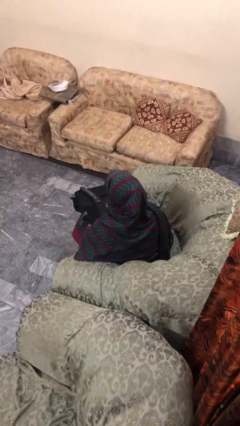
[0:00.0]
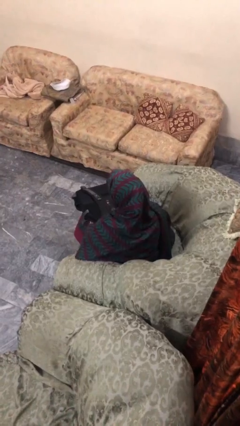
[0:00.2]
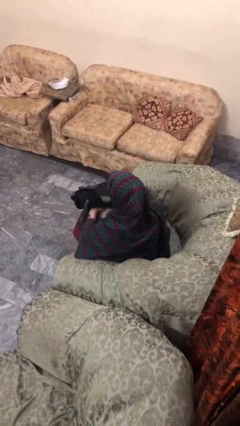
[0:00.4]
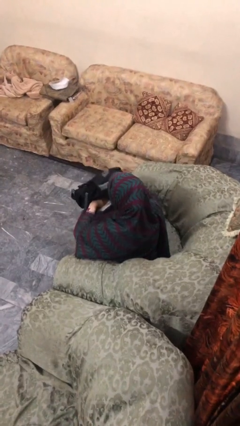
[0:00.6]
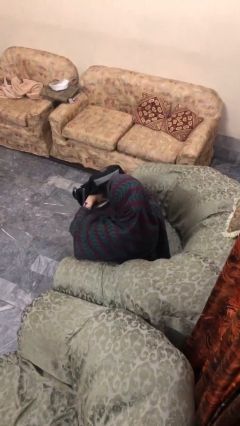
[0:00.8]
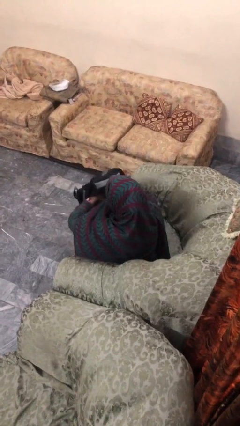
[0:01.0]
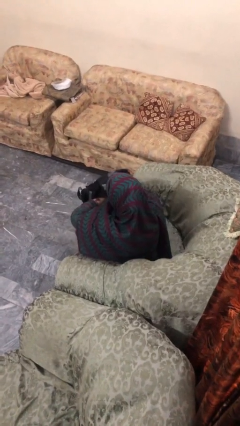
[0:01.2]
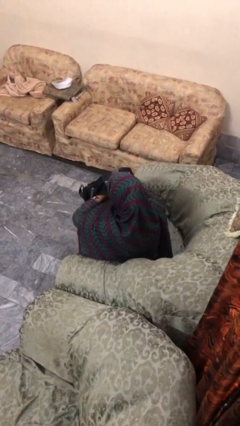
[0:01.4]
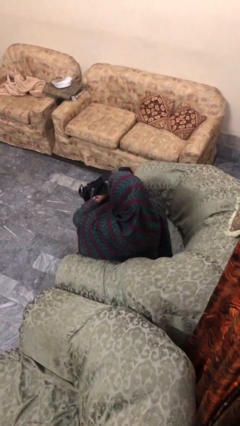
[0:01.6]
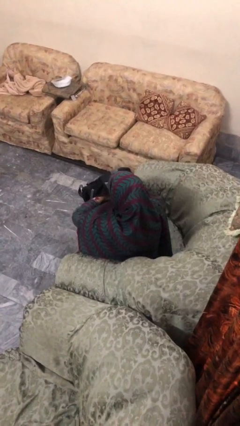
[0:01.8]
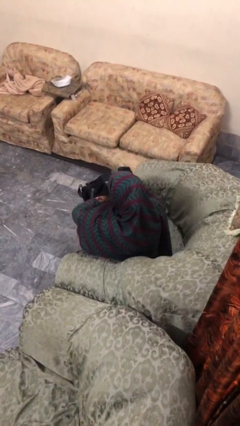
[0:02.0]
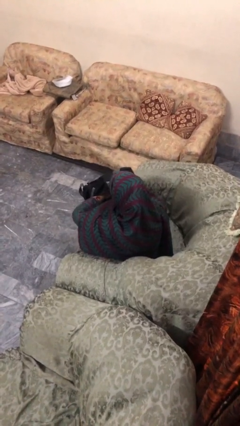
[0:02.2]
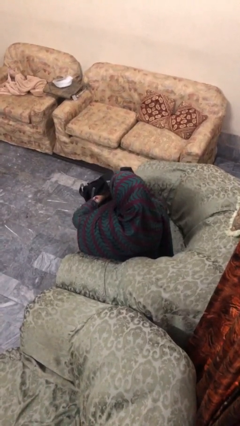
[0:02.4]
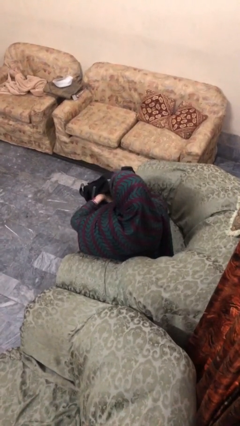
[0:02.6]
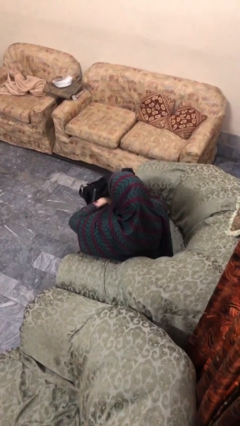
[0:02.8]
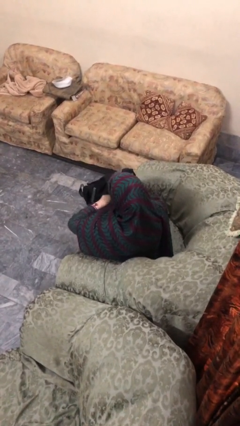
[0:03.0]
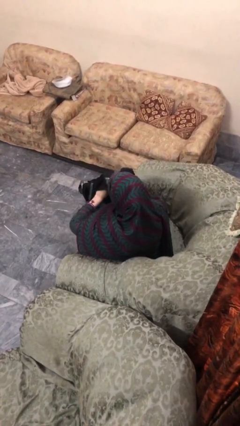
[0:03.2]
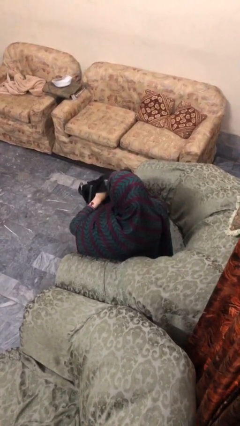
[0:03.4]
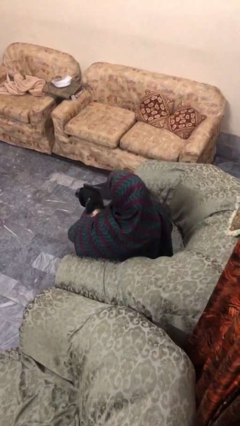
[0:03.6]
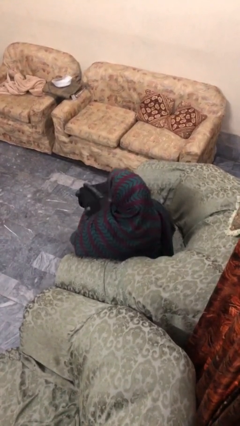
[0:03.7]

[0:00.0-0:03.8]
person searches in bag

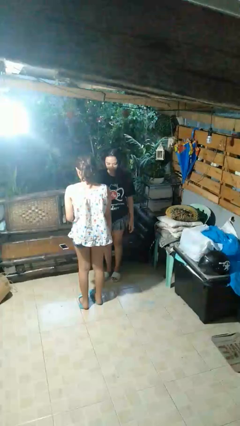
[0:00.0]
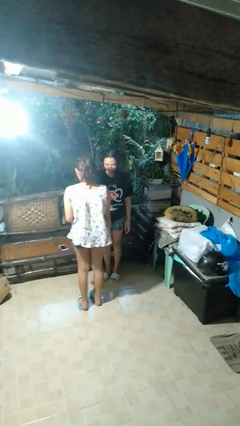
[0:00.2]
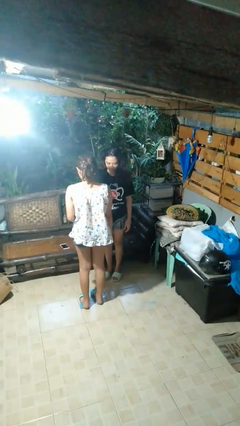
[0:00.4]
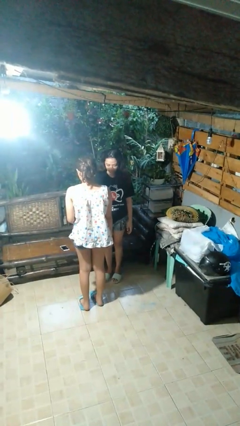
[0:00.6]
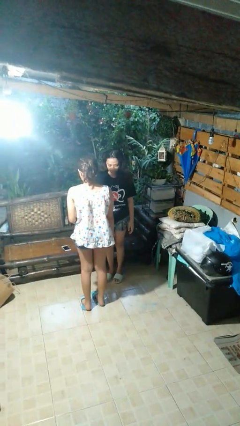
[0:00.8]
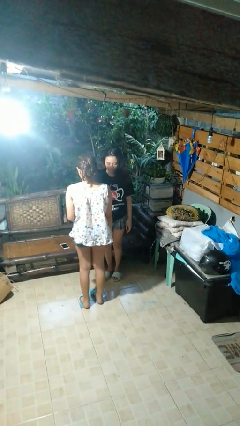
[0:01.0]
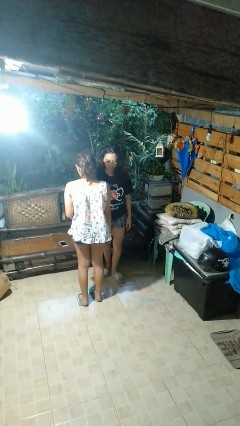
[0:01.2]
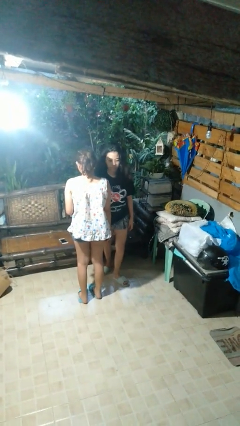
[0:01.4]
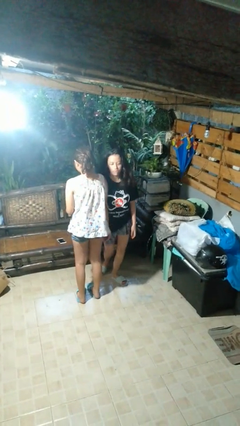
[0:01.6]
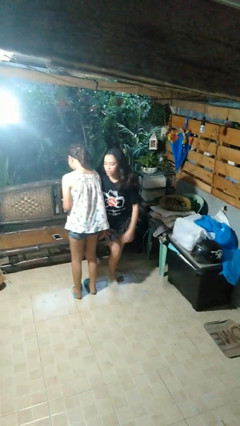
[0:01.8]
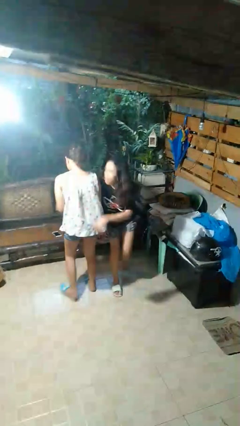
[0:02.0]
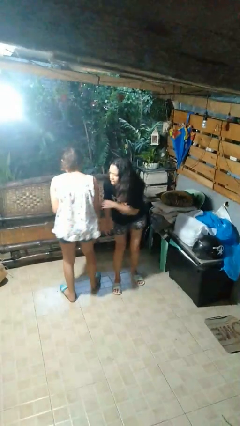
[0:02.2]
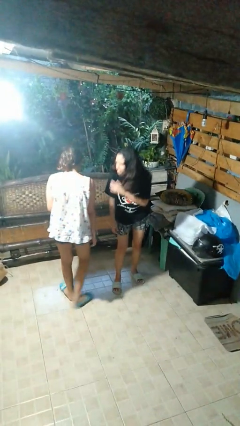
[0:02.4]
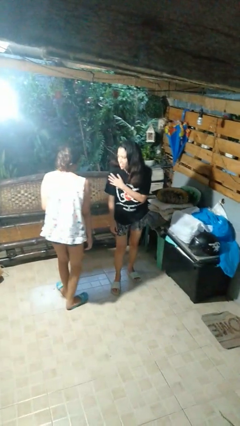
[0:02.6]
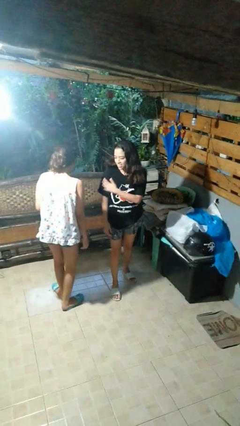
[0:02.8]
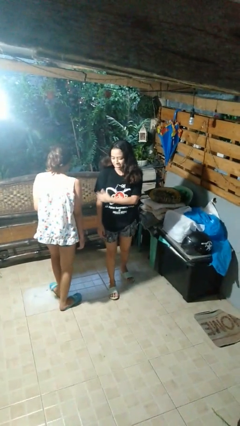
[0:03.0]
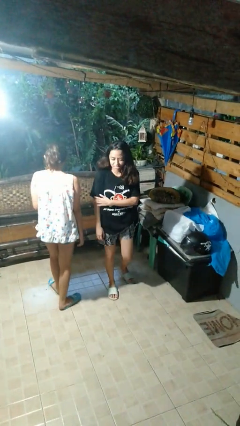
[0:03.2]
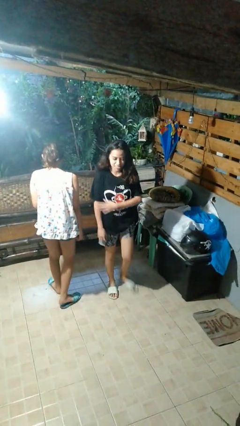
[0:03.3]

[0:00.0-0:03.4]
person bumps into person

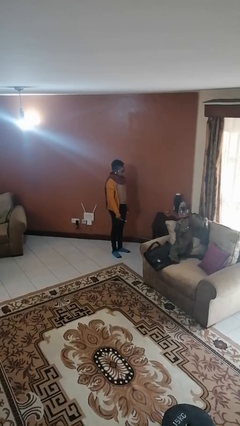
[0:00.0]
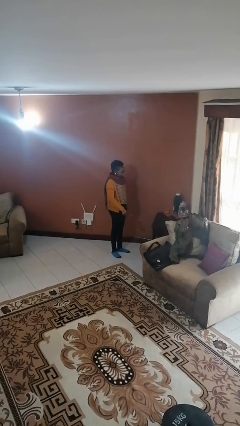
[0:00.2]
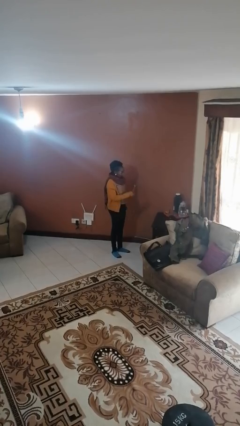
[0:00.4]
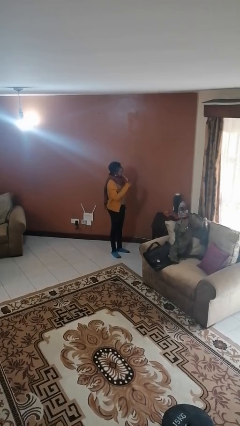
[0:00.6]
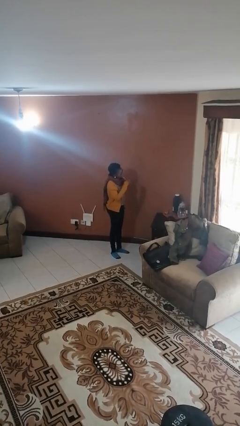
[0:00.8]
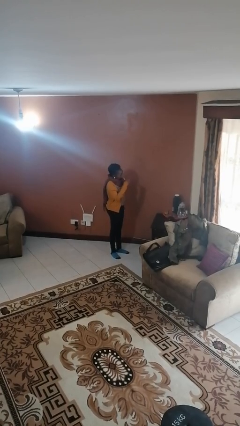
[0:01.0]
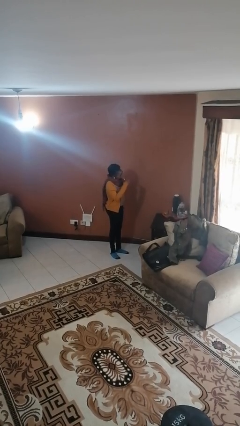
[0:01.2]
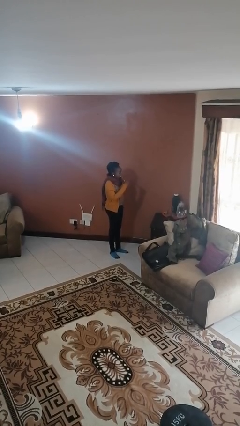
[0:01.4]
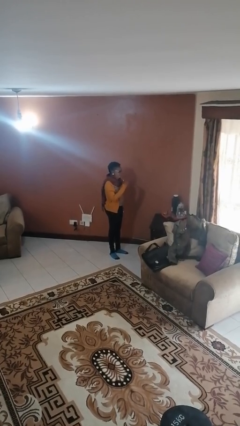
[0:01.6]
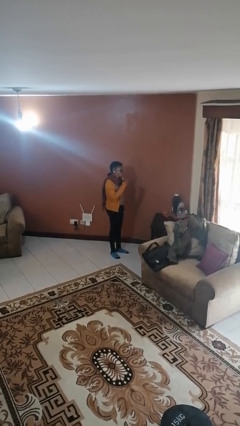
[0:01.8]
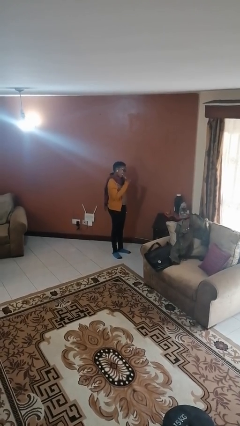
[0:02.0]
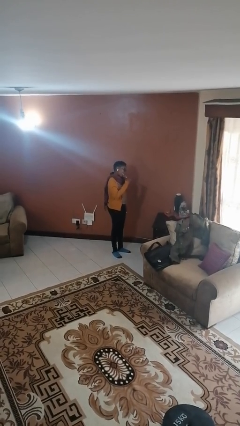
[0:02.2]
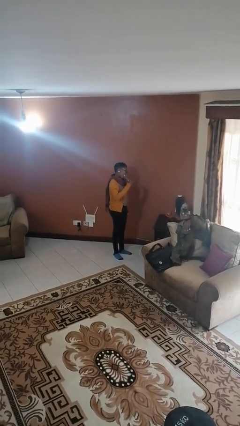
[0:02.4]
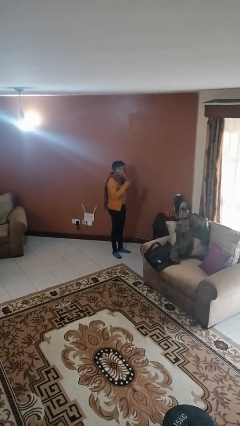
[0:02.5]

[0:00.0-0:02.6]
person brushes teeth

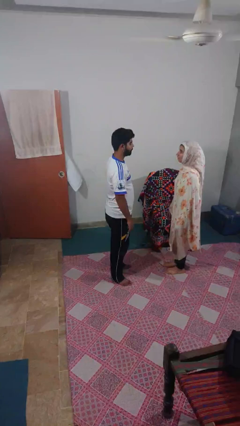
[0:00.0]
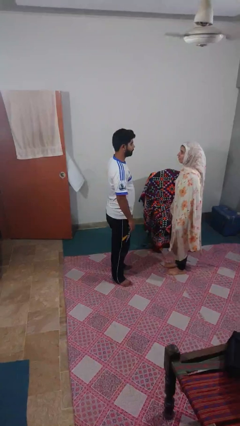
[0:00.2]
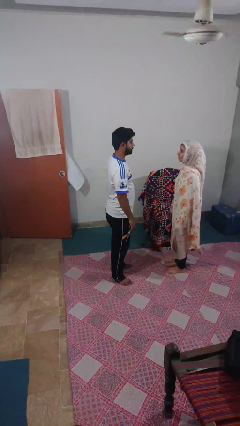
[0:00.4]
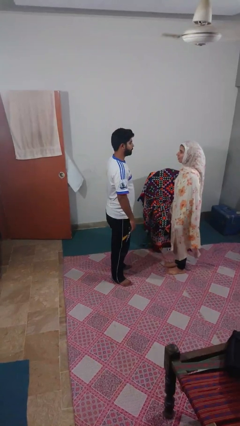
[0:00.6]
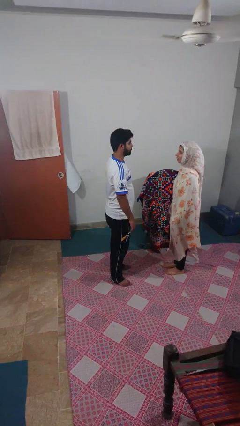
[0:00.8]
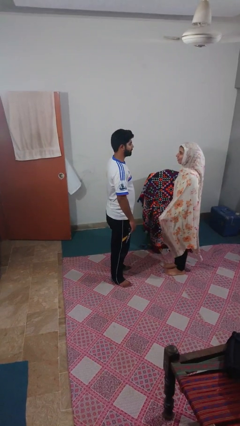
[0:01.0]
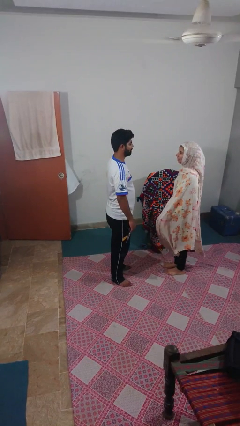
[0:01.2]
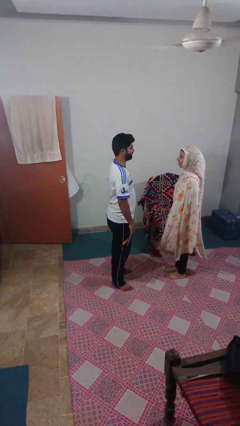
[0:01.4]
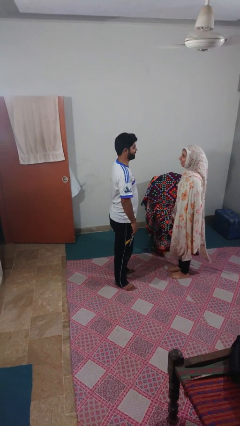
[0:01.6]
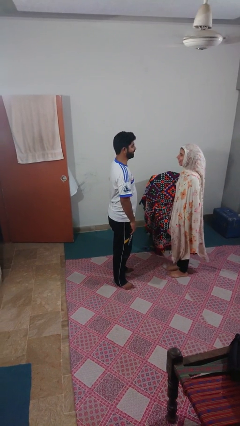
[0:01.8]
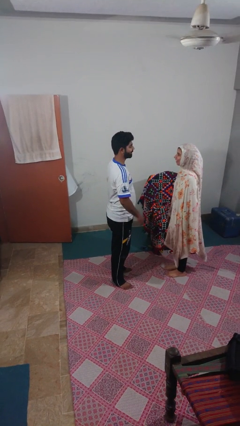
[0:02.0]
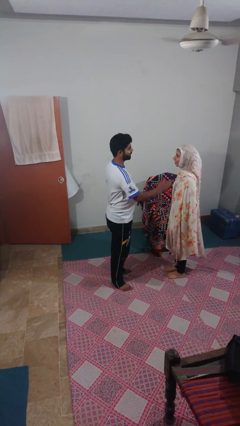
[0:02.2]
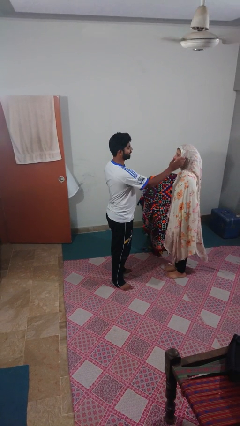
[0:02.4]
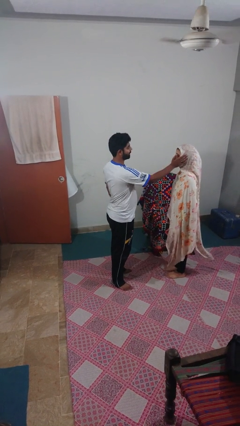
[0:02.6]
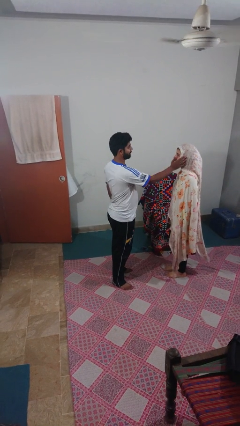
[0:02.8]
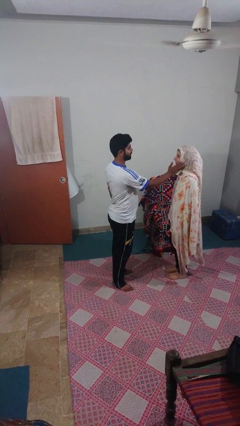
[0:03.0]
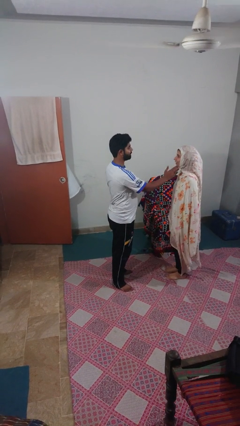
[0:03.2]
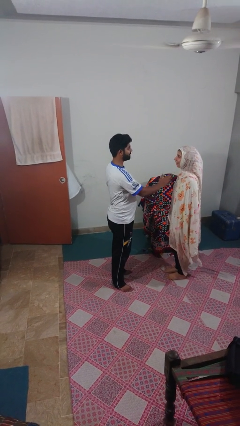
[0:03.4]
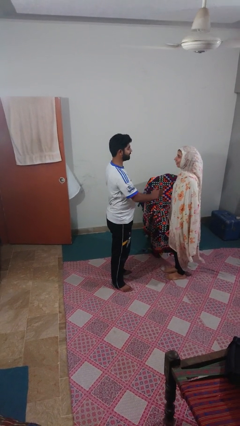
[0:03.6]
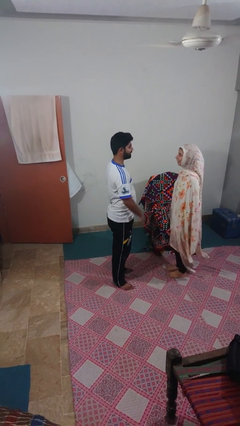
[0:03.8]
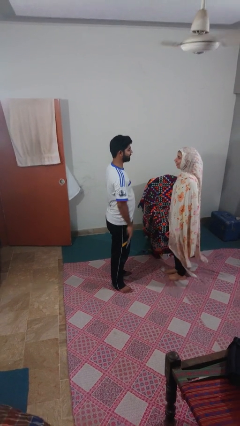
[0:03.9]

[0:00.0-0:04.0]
person touches face of person

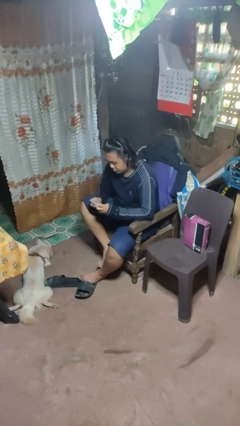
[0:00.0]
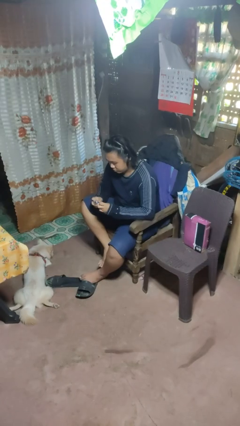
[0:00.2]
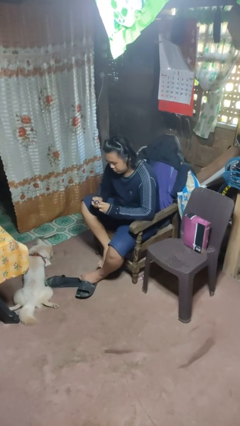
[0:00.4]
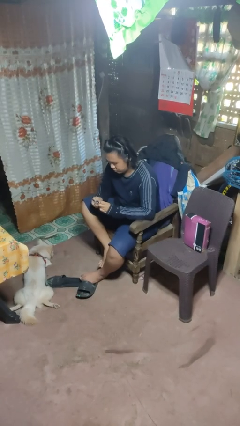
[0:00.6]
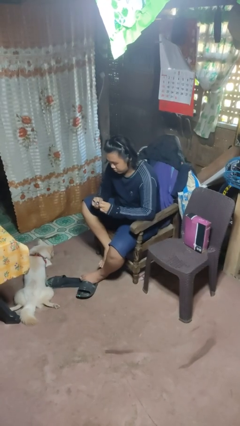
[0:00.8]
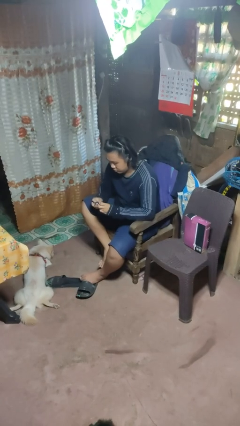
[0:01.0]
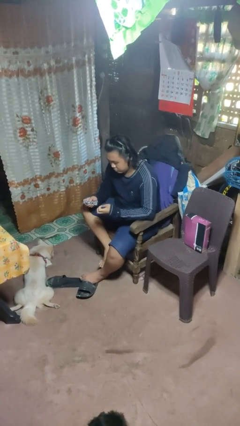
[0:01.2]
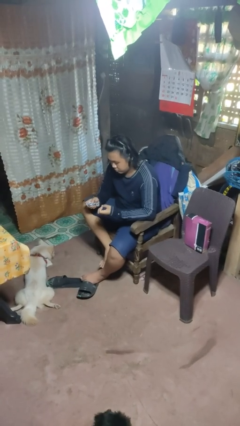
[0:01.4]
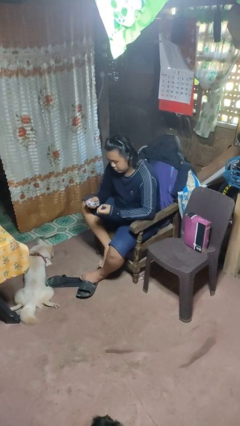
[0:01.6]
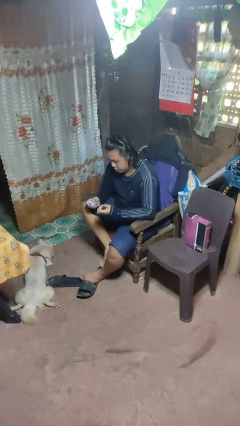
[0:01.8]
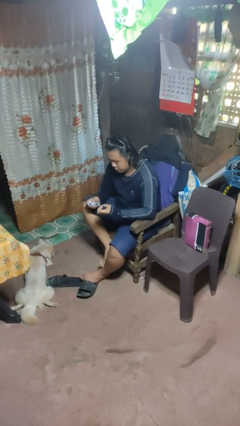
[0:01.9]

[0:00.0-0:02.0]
person files fingernails

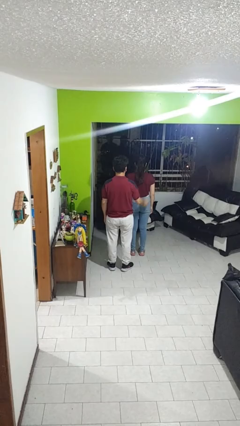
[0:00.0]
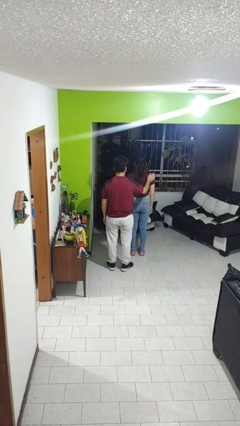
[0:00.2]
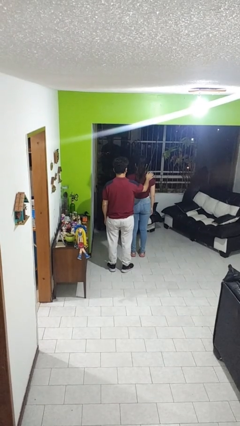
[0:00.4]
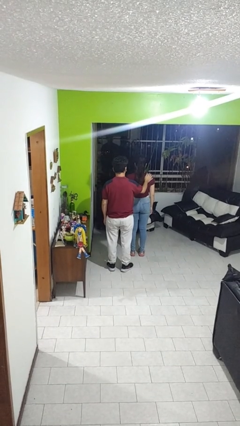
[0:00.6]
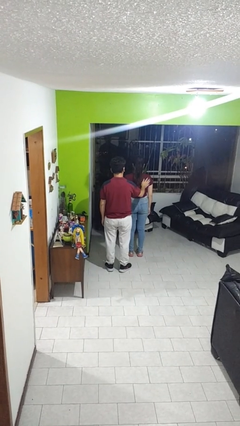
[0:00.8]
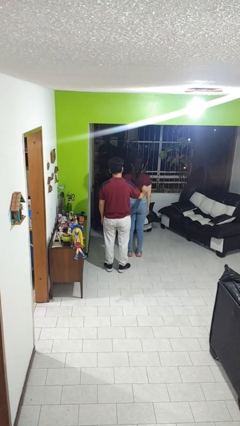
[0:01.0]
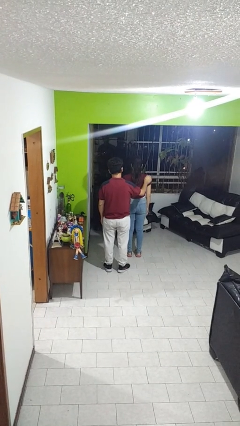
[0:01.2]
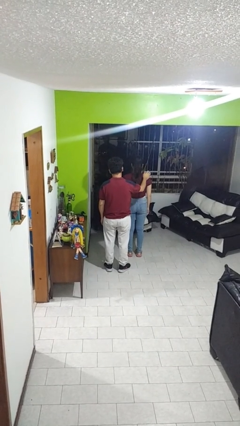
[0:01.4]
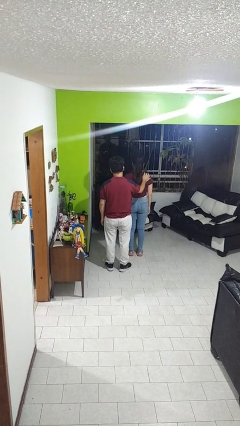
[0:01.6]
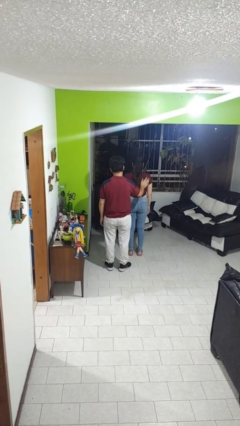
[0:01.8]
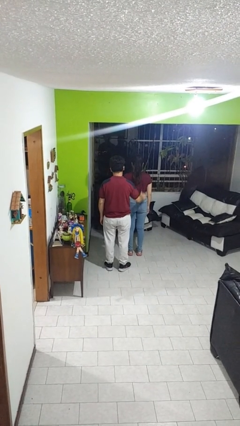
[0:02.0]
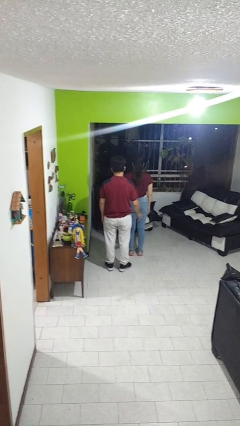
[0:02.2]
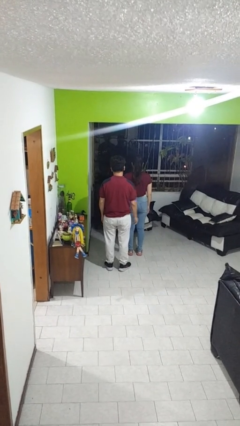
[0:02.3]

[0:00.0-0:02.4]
person touches back of person
